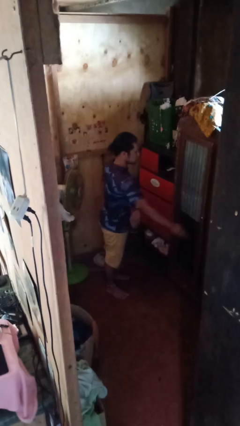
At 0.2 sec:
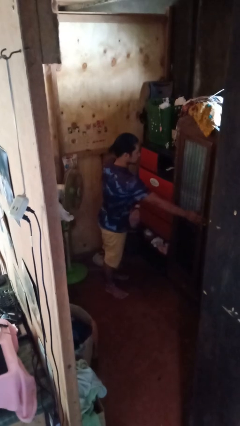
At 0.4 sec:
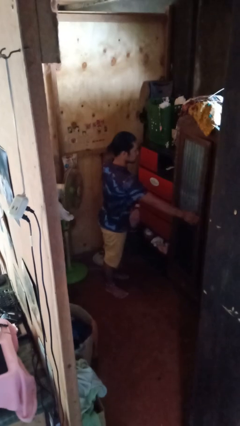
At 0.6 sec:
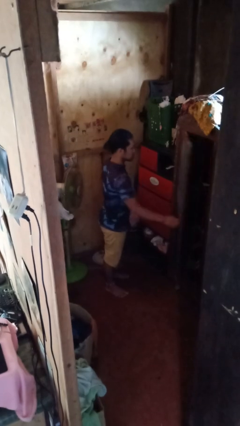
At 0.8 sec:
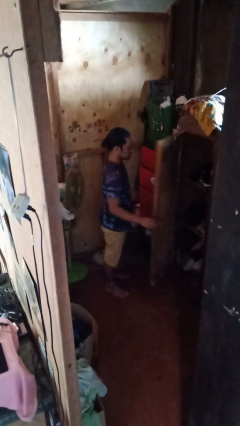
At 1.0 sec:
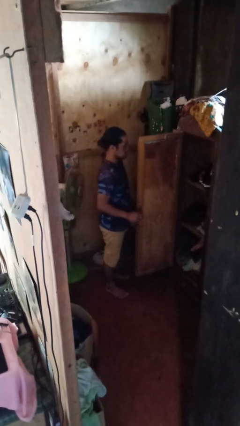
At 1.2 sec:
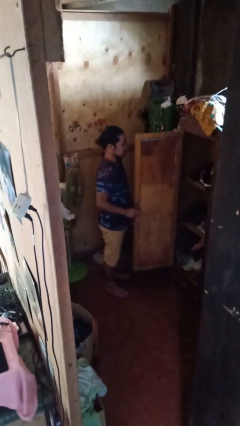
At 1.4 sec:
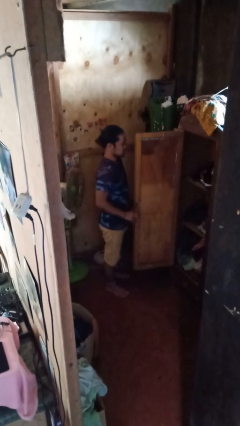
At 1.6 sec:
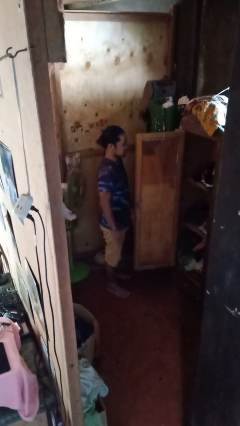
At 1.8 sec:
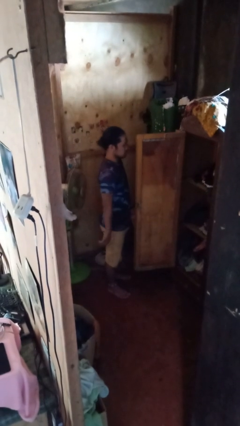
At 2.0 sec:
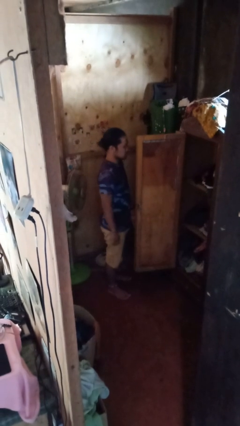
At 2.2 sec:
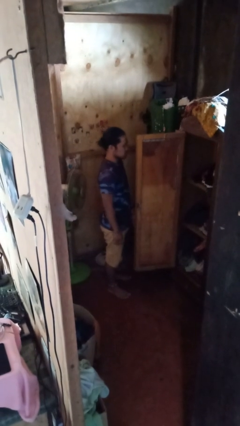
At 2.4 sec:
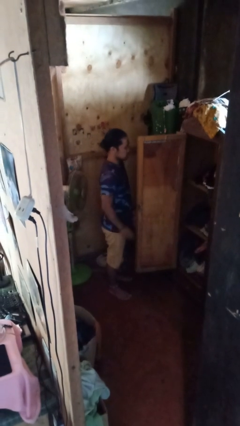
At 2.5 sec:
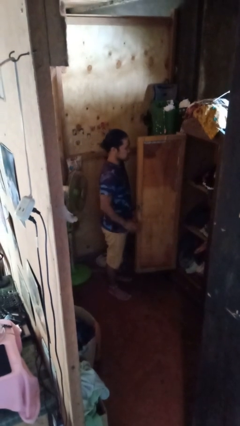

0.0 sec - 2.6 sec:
person opens closet door

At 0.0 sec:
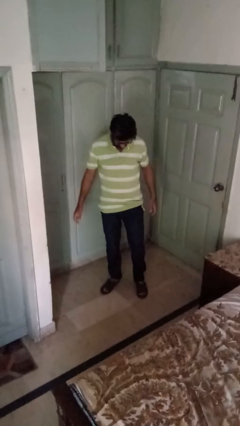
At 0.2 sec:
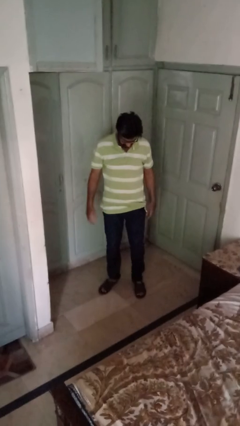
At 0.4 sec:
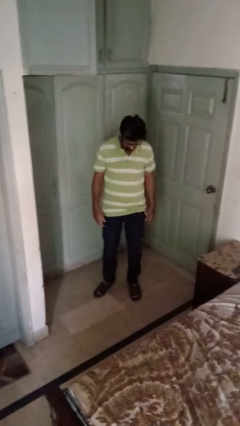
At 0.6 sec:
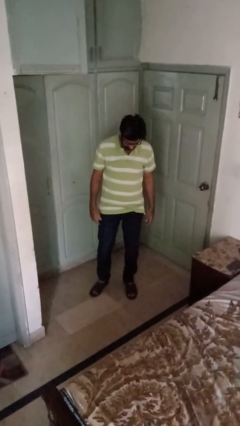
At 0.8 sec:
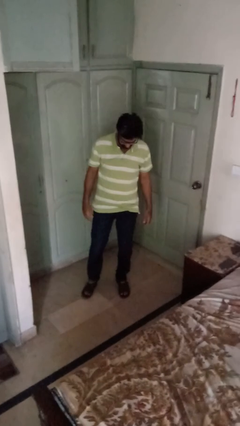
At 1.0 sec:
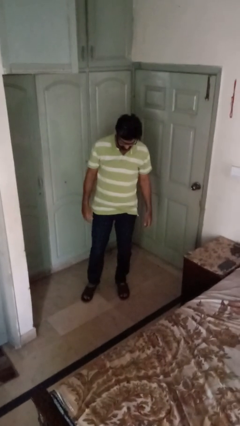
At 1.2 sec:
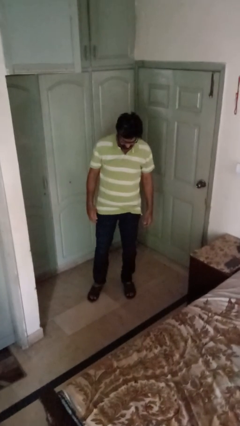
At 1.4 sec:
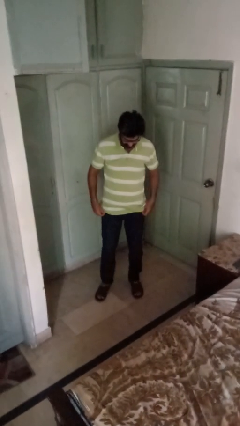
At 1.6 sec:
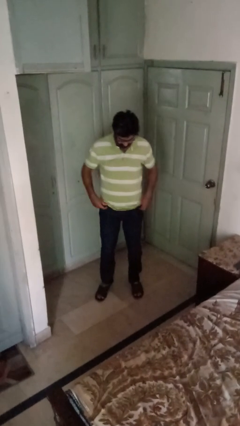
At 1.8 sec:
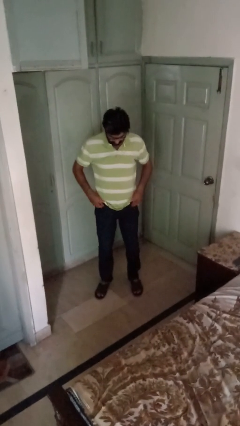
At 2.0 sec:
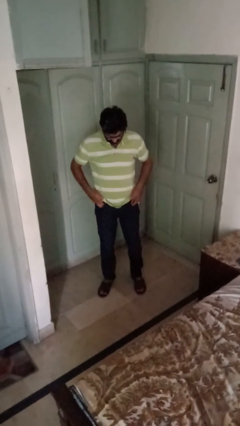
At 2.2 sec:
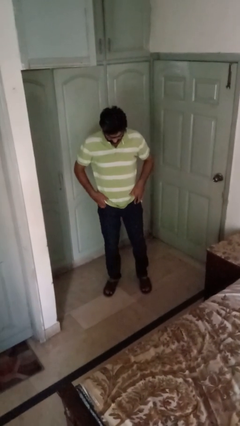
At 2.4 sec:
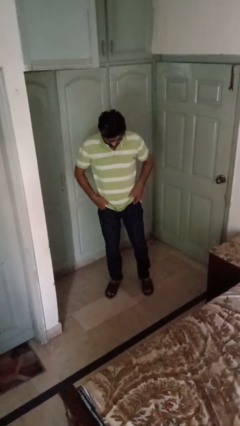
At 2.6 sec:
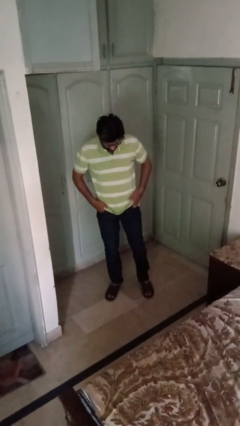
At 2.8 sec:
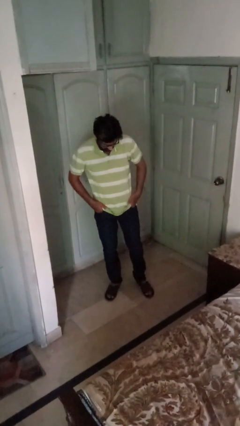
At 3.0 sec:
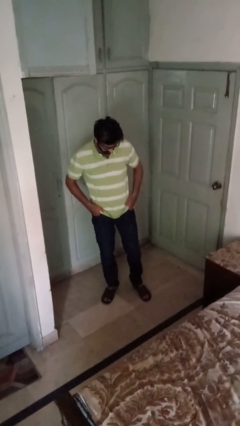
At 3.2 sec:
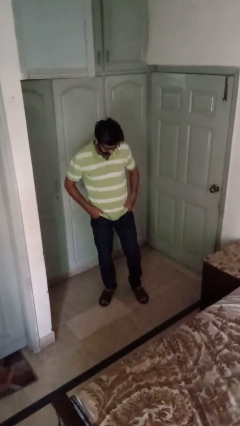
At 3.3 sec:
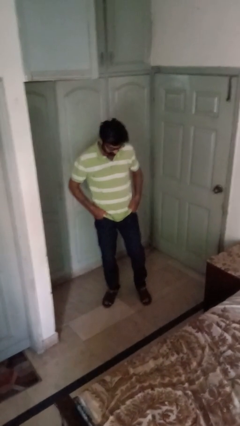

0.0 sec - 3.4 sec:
person puts hands in back pockets

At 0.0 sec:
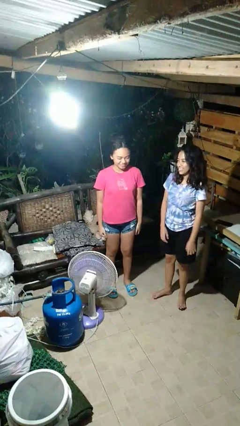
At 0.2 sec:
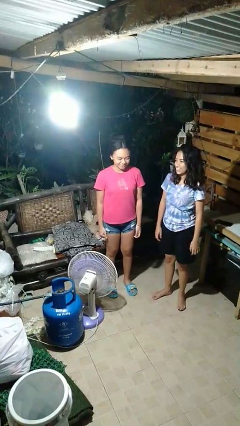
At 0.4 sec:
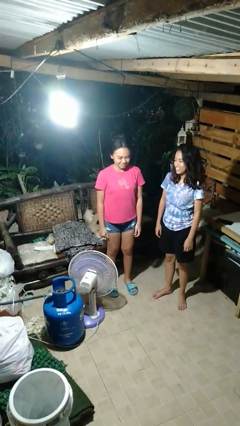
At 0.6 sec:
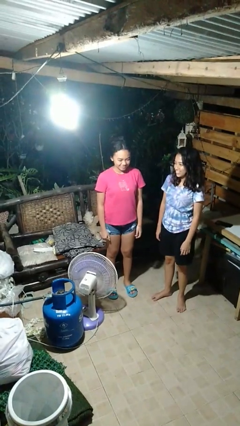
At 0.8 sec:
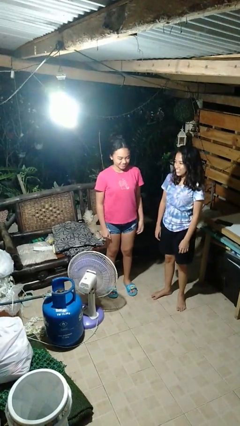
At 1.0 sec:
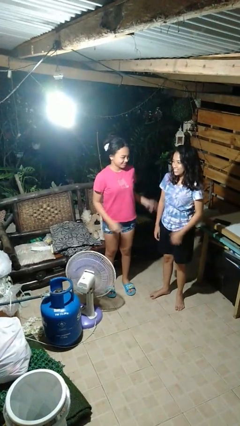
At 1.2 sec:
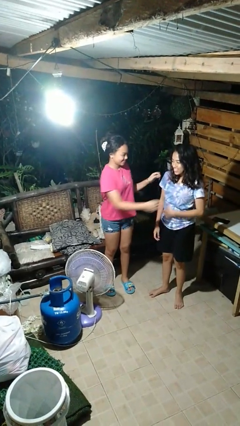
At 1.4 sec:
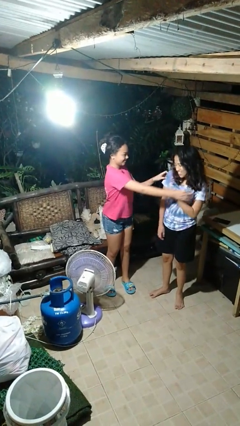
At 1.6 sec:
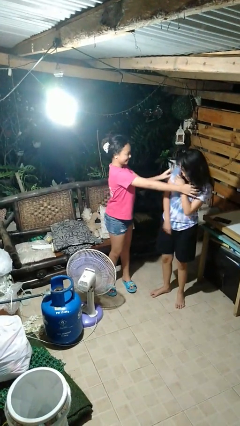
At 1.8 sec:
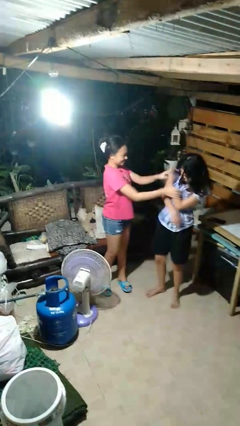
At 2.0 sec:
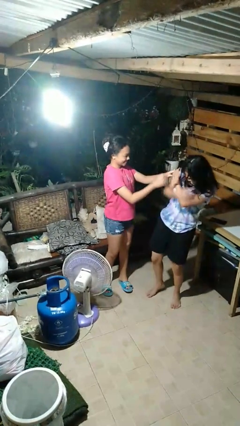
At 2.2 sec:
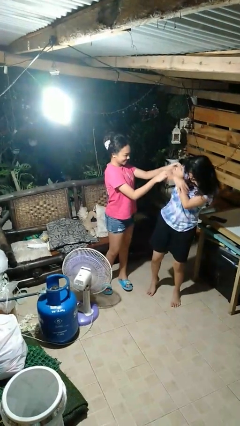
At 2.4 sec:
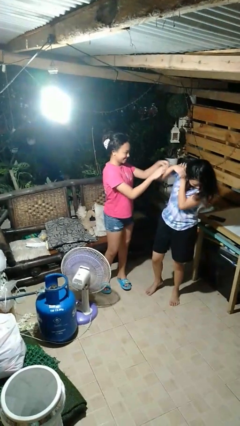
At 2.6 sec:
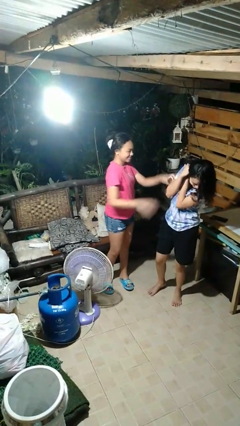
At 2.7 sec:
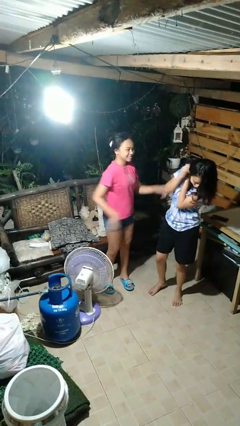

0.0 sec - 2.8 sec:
person tickles person

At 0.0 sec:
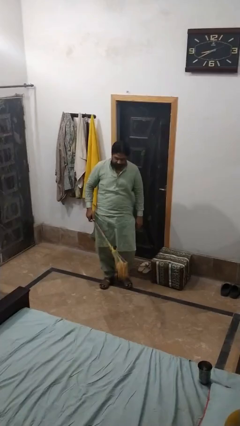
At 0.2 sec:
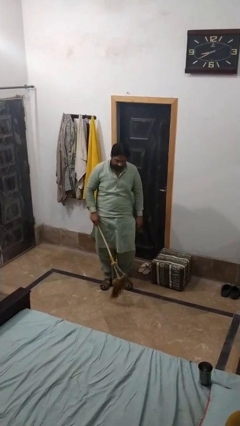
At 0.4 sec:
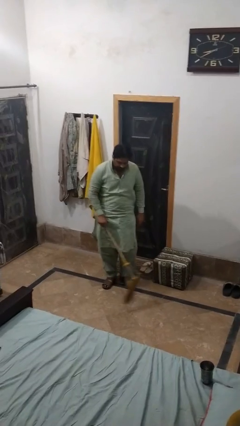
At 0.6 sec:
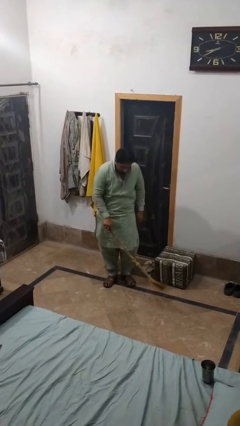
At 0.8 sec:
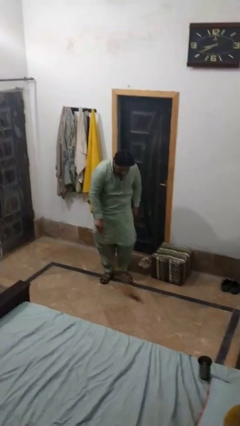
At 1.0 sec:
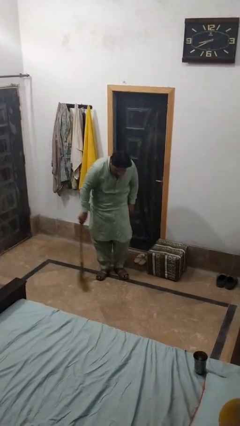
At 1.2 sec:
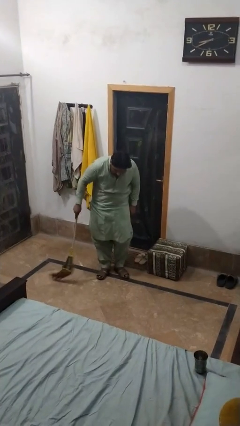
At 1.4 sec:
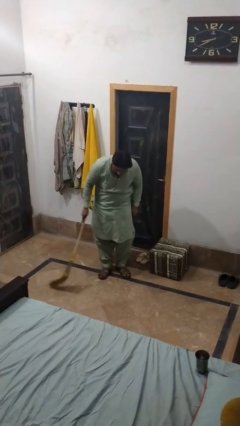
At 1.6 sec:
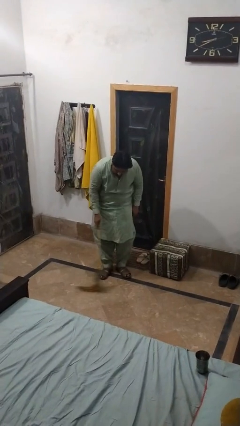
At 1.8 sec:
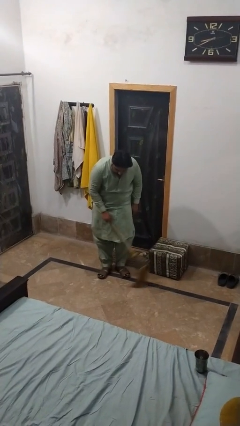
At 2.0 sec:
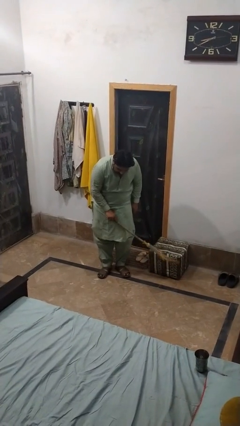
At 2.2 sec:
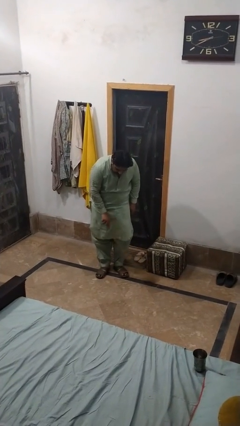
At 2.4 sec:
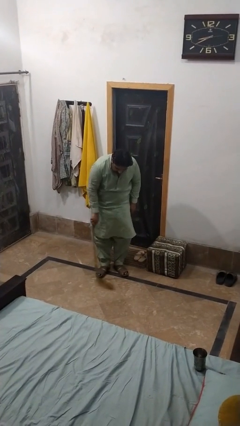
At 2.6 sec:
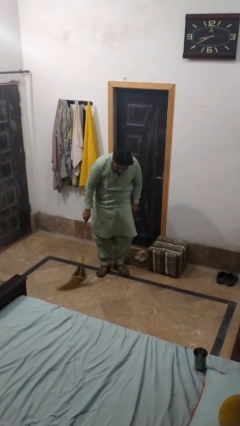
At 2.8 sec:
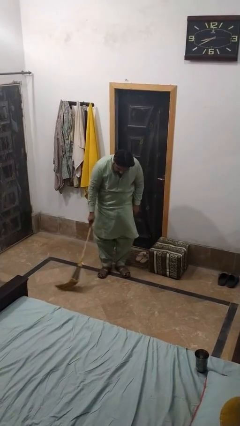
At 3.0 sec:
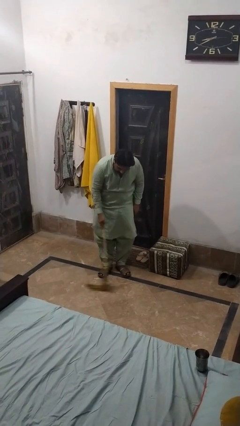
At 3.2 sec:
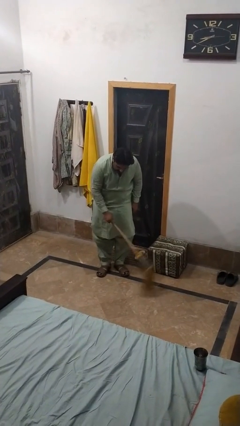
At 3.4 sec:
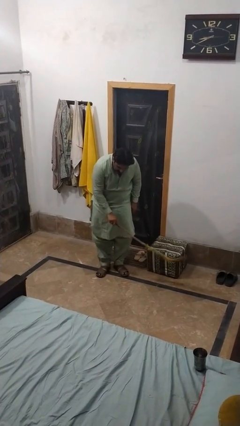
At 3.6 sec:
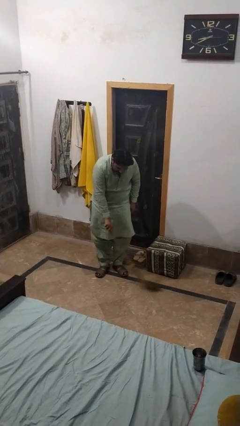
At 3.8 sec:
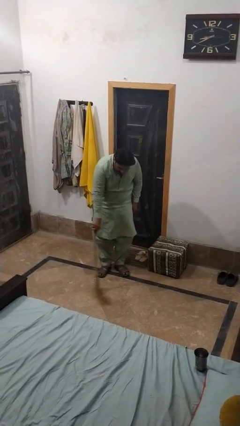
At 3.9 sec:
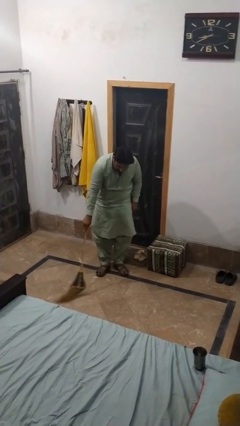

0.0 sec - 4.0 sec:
person mops

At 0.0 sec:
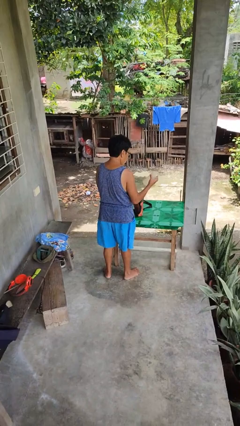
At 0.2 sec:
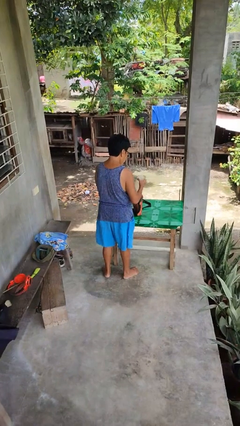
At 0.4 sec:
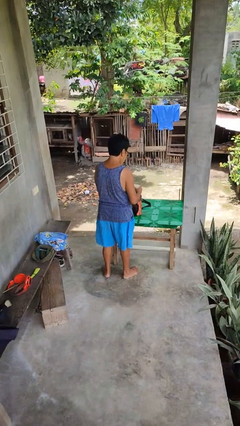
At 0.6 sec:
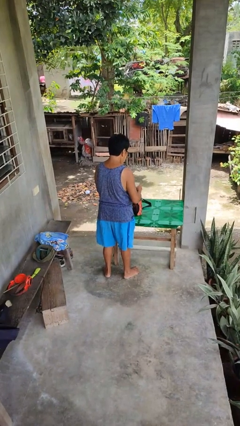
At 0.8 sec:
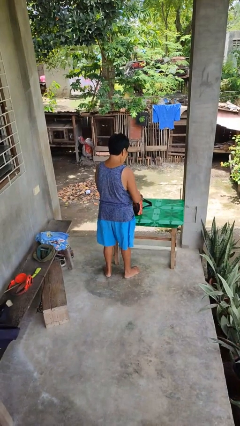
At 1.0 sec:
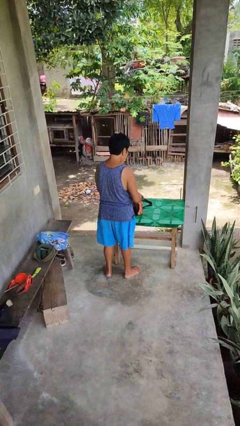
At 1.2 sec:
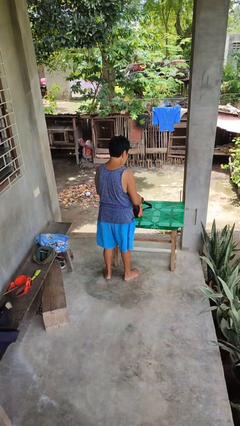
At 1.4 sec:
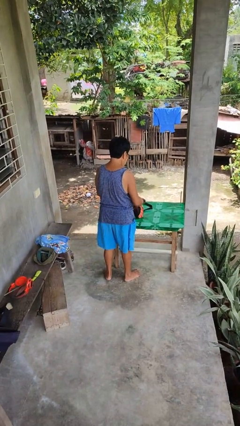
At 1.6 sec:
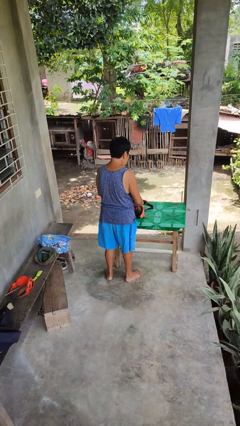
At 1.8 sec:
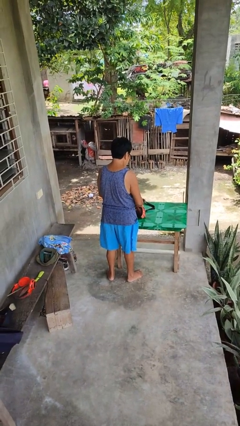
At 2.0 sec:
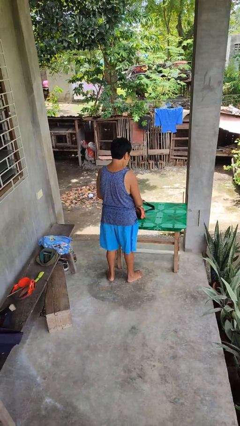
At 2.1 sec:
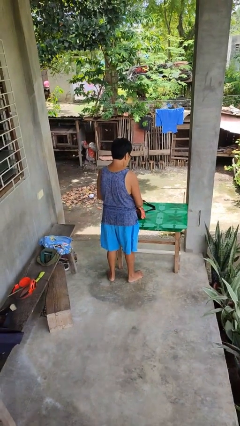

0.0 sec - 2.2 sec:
person puts object into purse

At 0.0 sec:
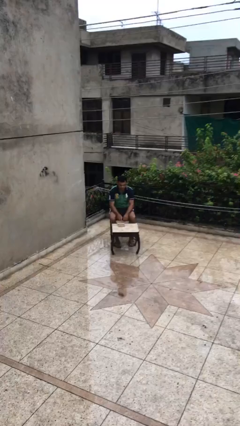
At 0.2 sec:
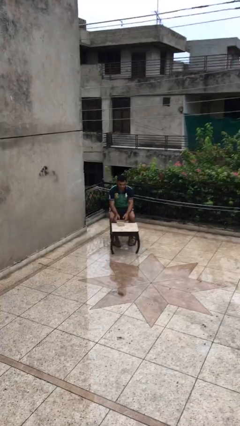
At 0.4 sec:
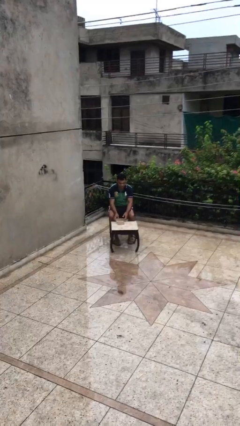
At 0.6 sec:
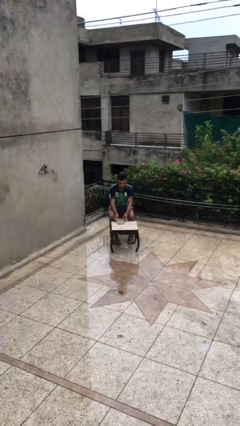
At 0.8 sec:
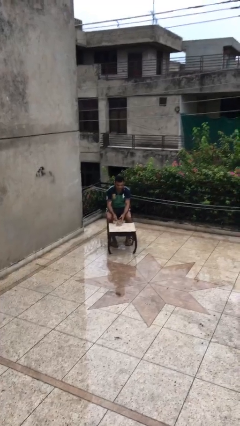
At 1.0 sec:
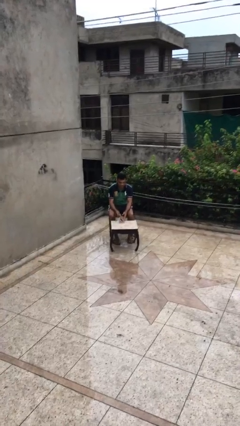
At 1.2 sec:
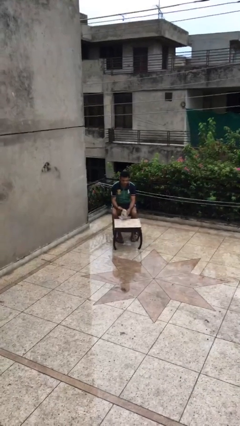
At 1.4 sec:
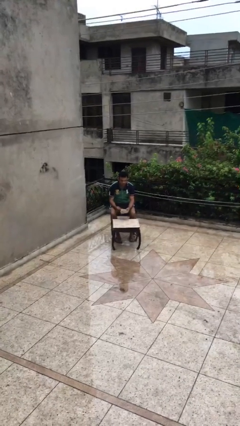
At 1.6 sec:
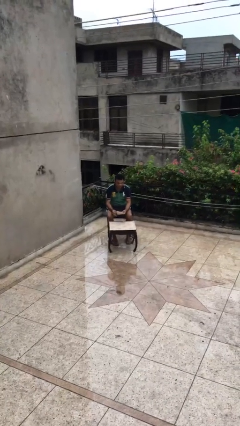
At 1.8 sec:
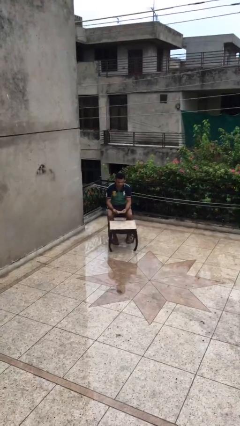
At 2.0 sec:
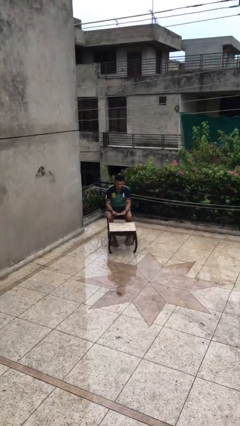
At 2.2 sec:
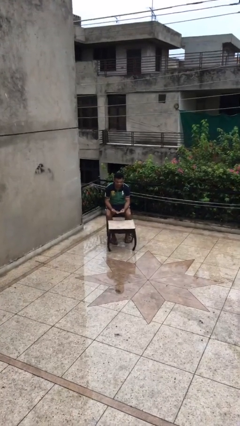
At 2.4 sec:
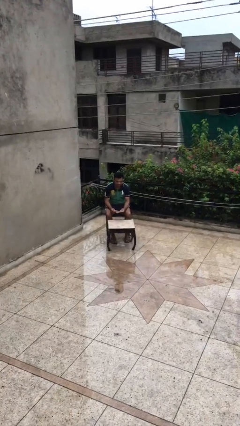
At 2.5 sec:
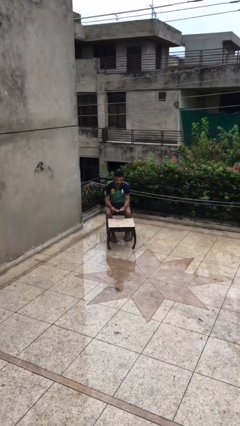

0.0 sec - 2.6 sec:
person picks up object from table
